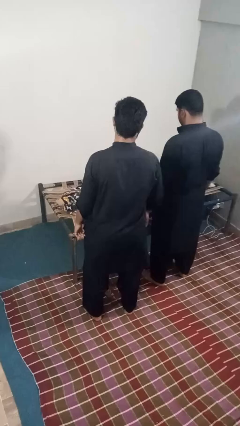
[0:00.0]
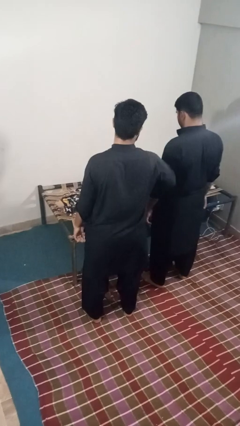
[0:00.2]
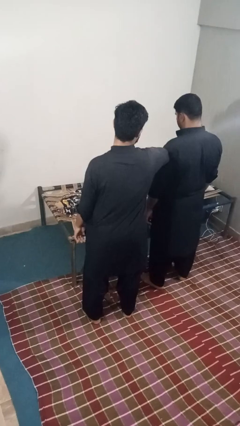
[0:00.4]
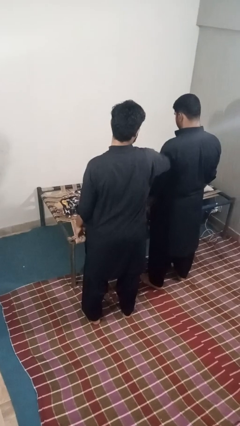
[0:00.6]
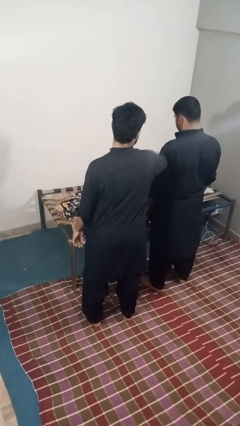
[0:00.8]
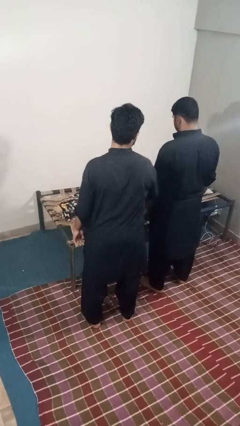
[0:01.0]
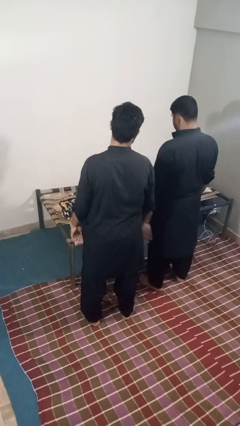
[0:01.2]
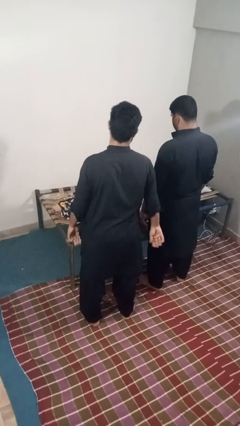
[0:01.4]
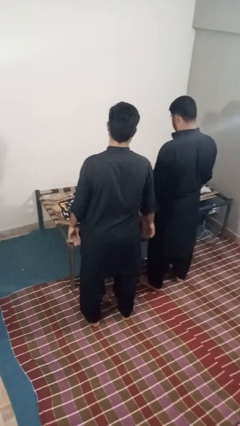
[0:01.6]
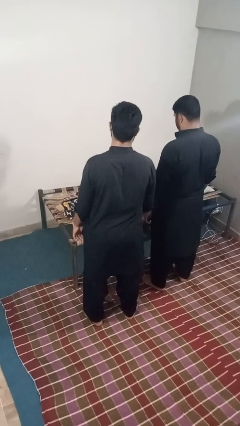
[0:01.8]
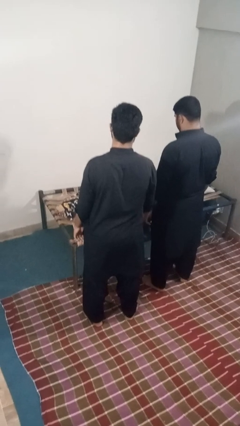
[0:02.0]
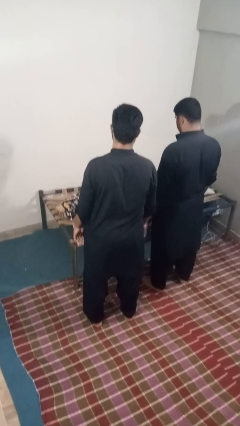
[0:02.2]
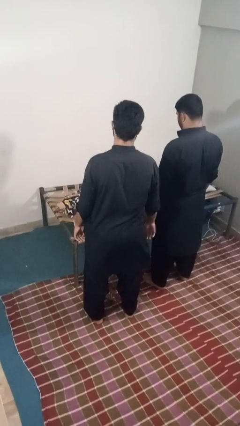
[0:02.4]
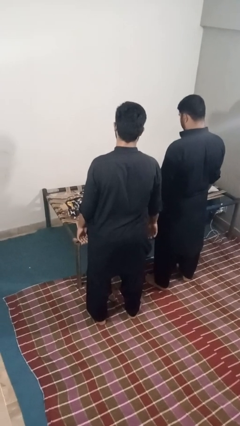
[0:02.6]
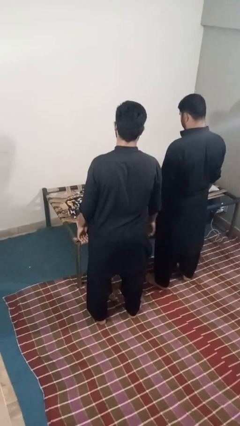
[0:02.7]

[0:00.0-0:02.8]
person nudges person with elbow

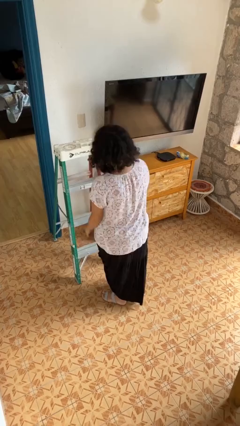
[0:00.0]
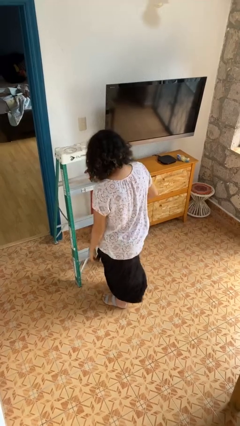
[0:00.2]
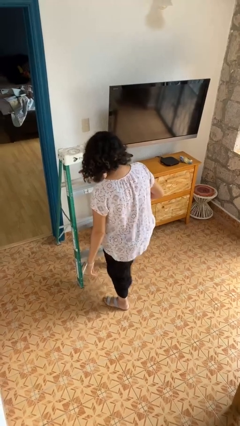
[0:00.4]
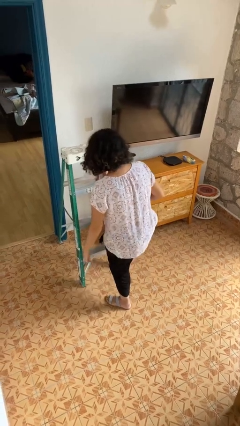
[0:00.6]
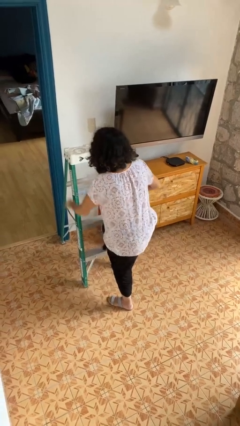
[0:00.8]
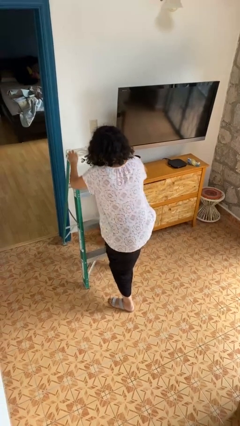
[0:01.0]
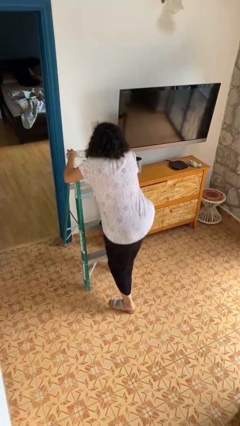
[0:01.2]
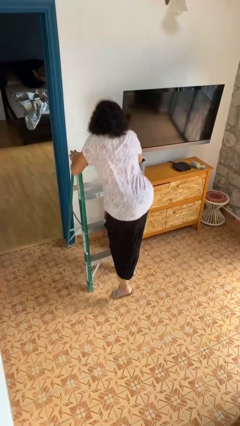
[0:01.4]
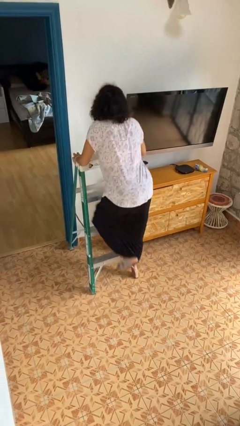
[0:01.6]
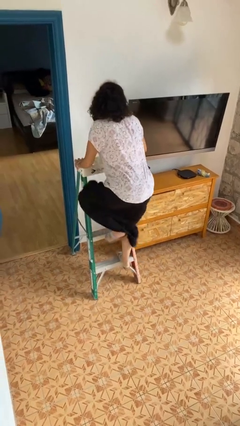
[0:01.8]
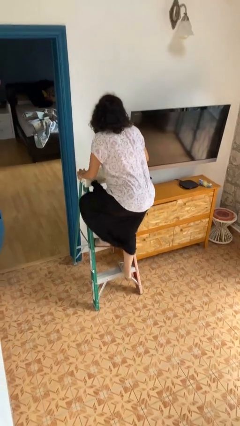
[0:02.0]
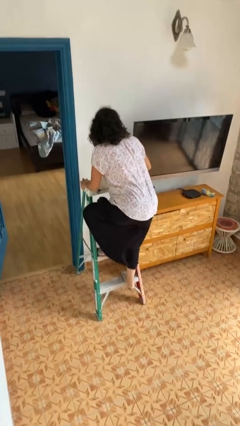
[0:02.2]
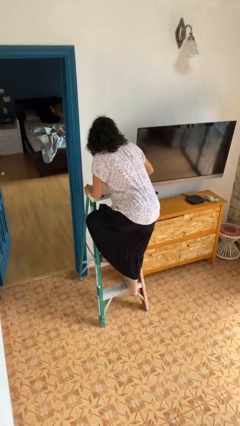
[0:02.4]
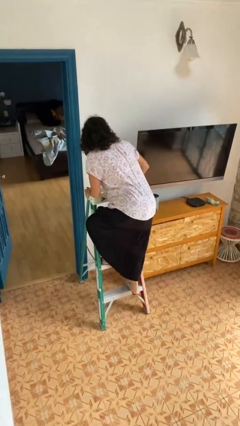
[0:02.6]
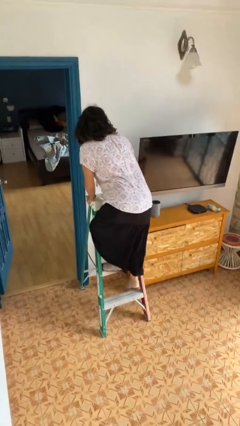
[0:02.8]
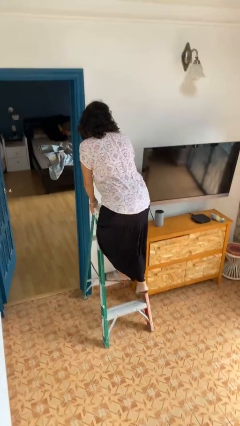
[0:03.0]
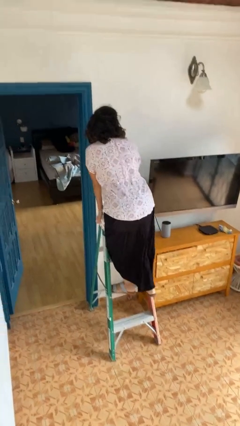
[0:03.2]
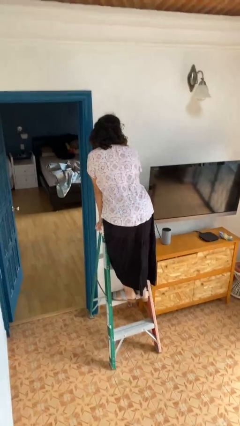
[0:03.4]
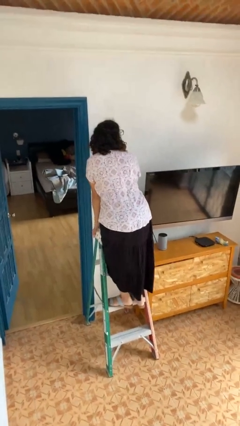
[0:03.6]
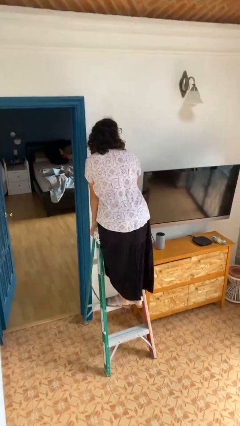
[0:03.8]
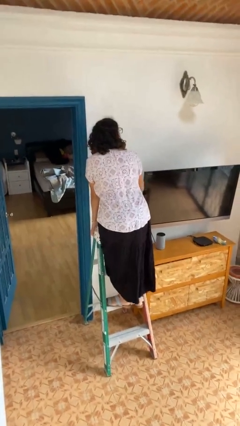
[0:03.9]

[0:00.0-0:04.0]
person climbs up ladder

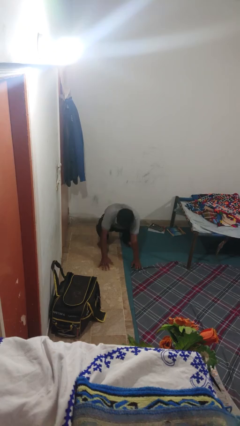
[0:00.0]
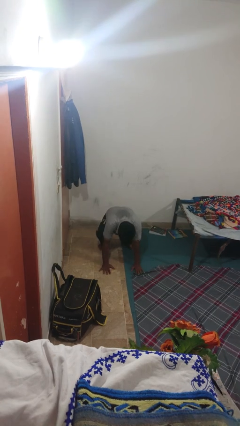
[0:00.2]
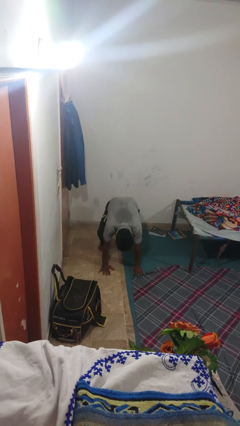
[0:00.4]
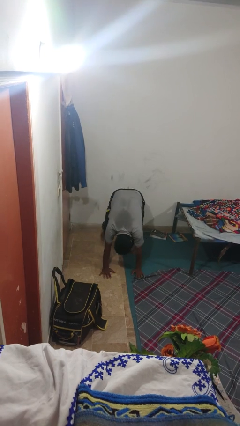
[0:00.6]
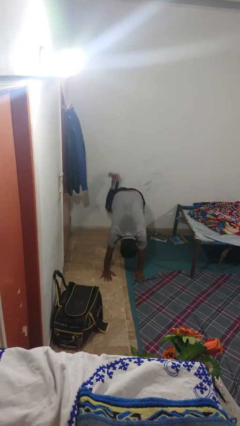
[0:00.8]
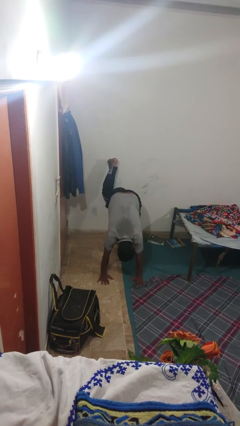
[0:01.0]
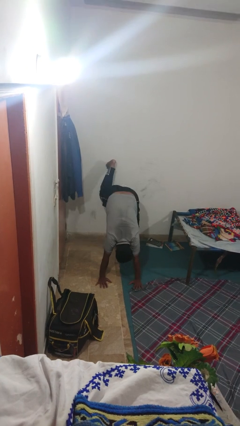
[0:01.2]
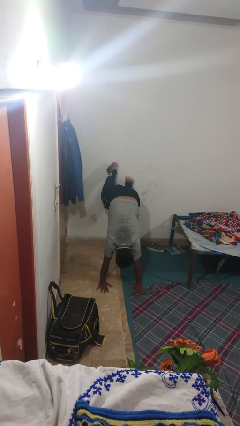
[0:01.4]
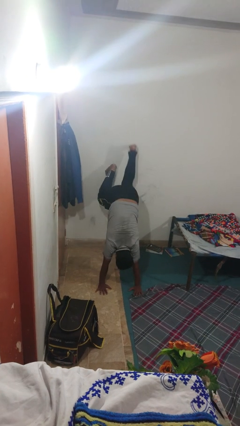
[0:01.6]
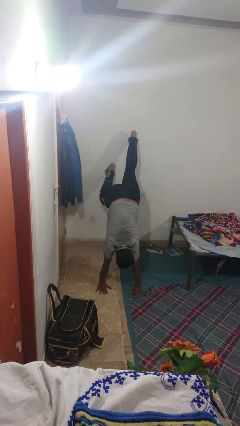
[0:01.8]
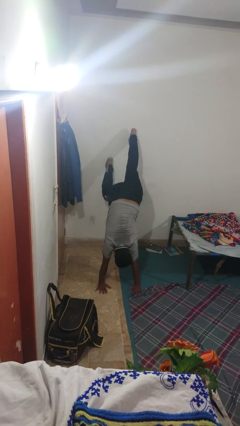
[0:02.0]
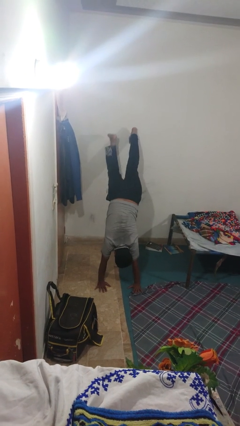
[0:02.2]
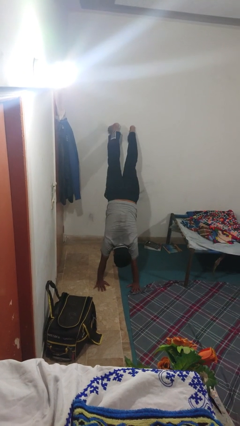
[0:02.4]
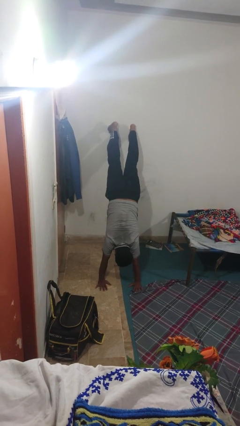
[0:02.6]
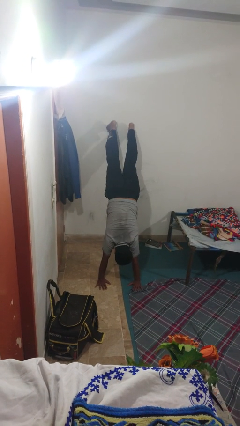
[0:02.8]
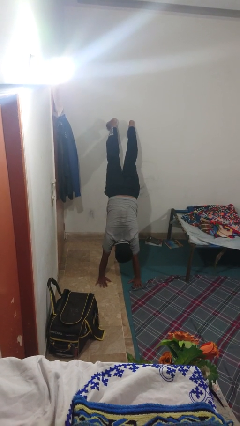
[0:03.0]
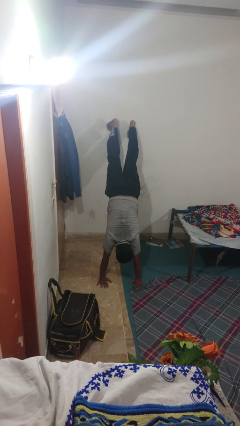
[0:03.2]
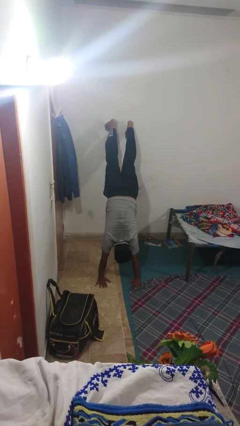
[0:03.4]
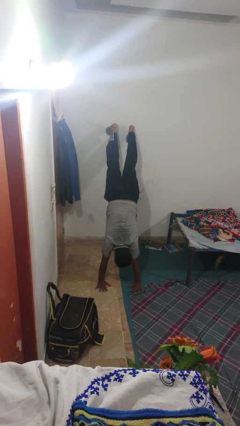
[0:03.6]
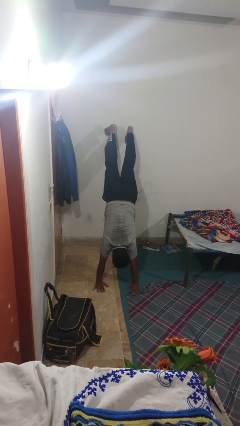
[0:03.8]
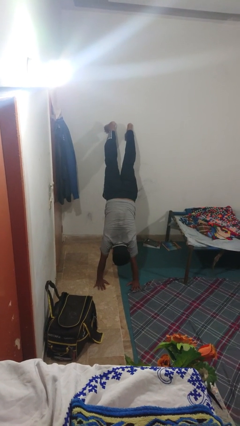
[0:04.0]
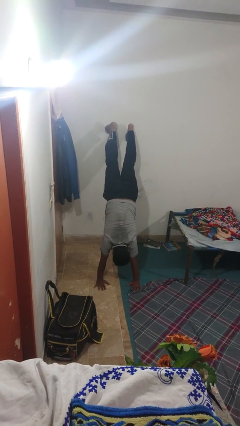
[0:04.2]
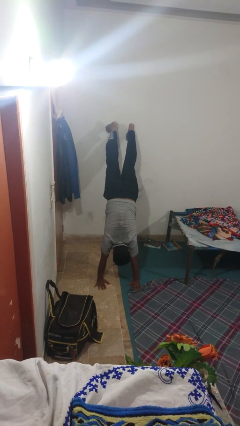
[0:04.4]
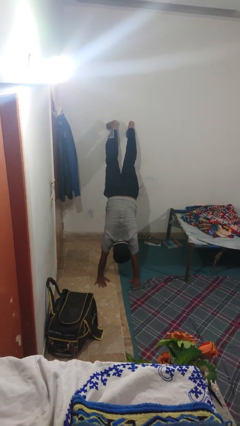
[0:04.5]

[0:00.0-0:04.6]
person handstand

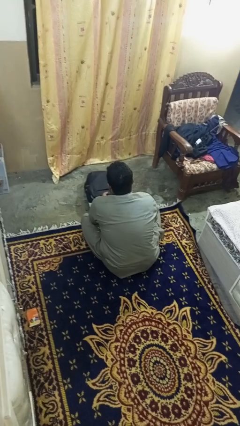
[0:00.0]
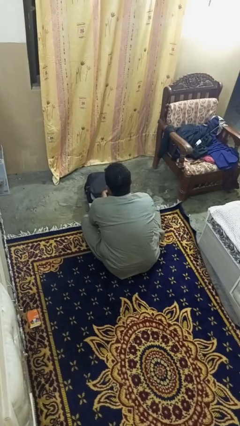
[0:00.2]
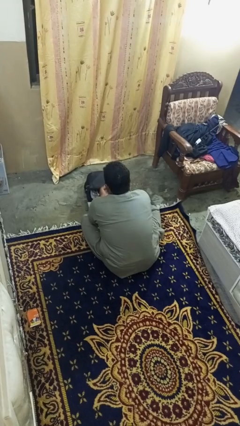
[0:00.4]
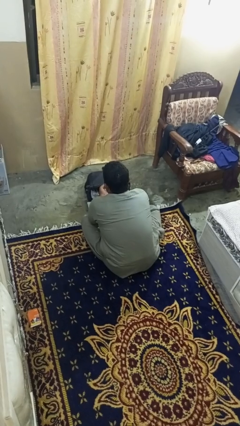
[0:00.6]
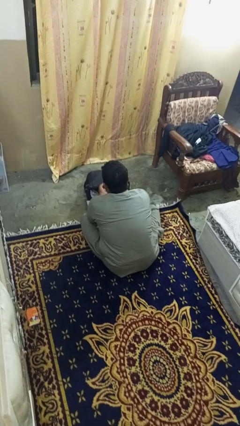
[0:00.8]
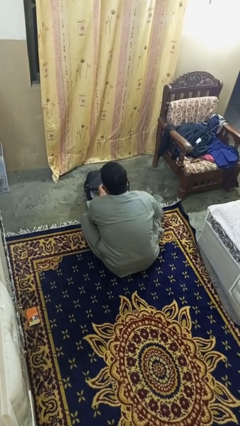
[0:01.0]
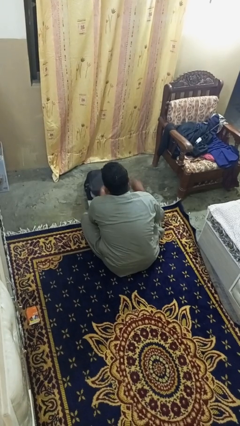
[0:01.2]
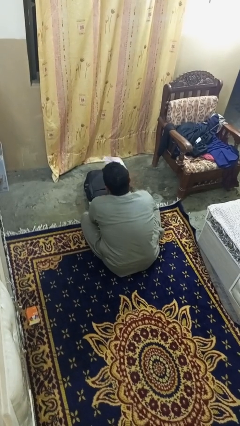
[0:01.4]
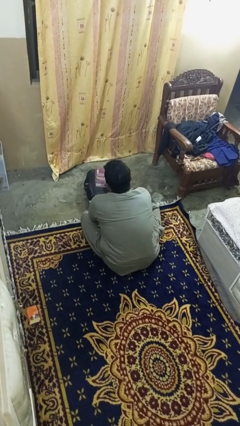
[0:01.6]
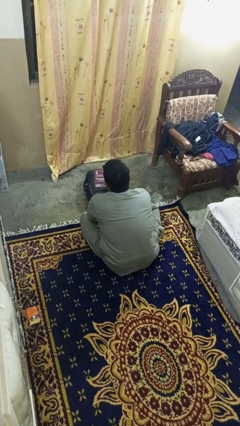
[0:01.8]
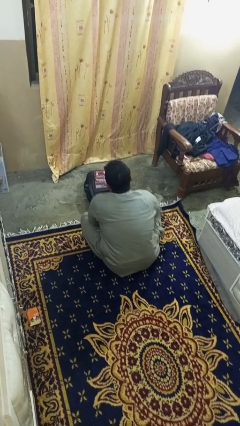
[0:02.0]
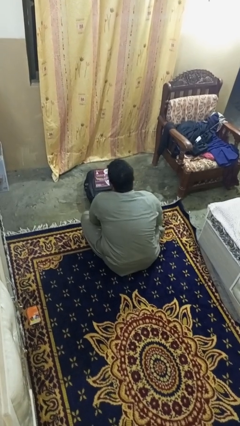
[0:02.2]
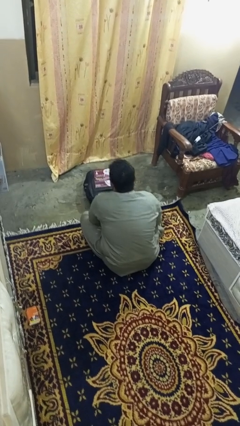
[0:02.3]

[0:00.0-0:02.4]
person takes object from bag

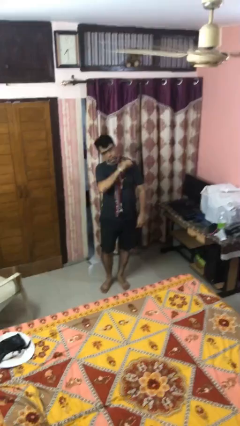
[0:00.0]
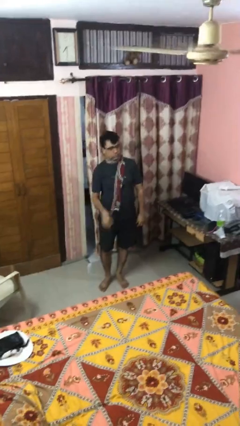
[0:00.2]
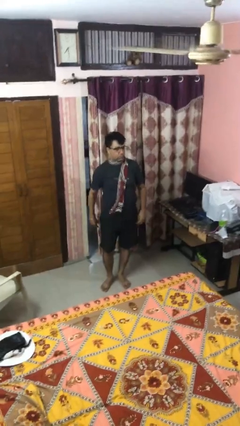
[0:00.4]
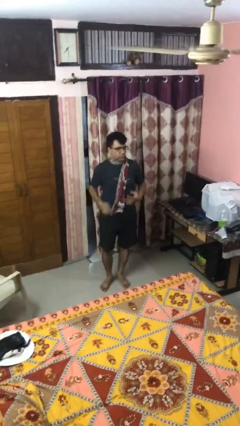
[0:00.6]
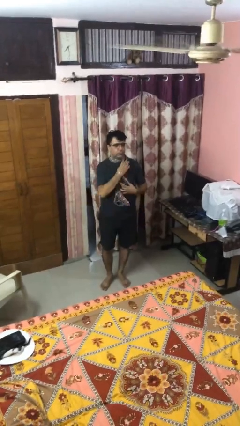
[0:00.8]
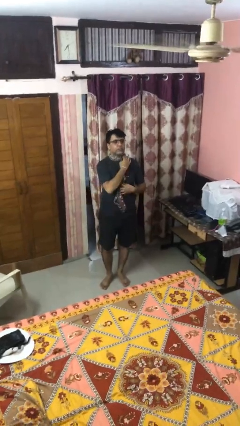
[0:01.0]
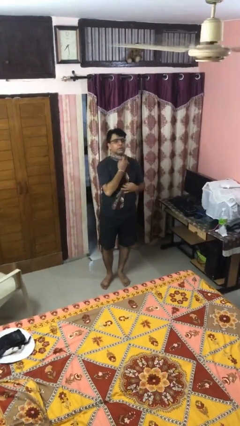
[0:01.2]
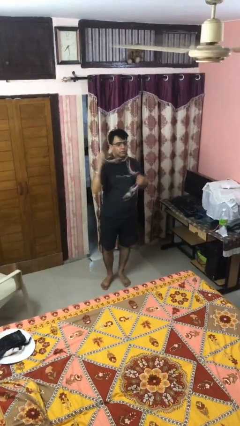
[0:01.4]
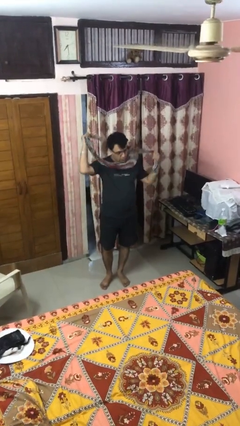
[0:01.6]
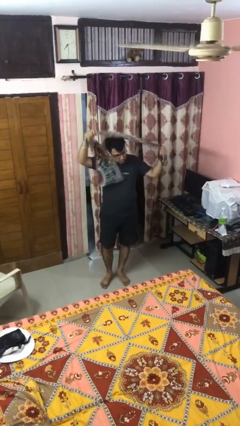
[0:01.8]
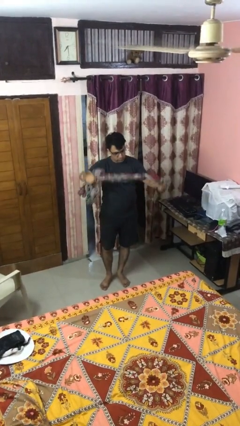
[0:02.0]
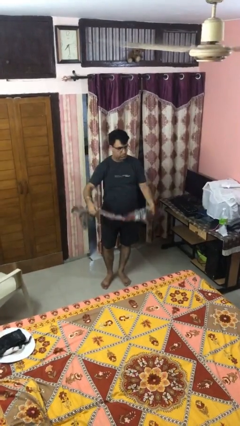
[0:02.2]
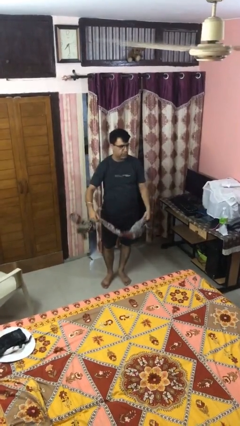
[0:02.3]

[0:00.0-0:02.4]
person takes off scarf

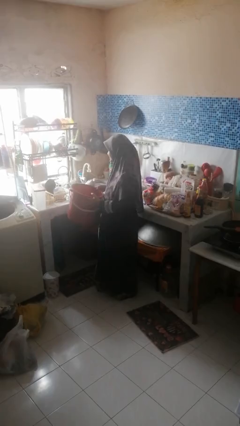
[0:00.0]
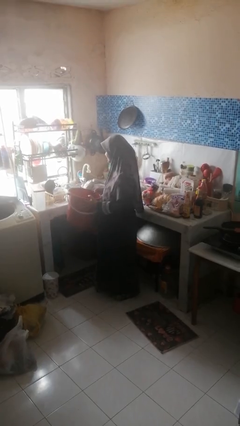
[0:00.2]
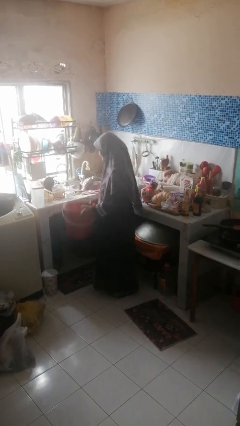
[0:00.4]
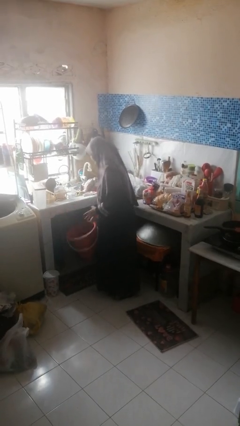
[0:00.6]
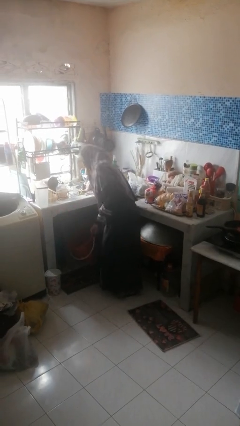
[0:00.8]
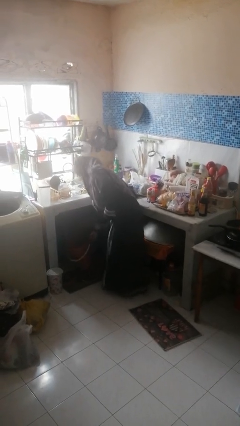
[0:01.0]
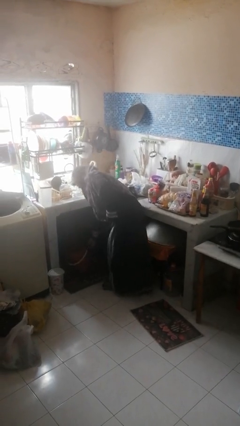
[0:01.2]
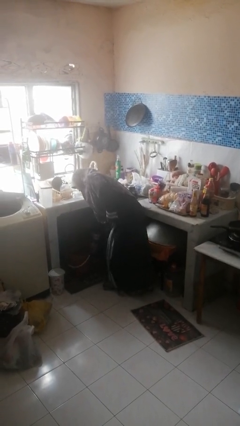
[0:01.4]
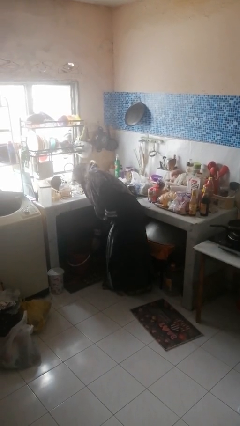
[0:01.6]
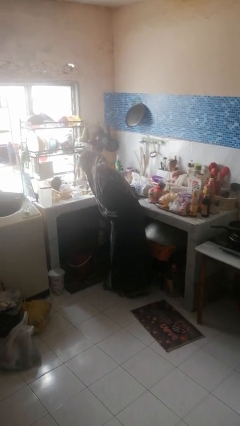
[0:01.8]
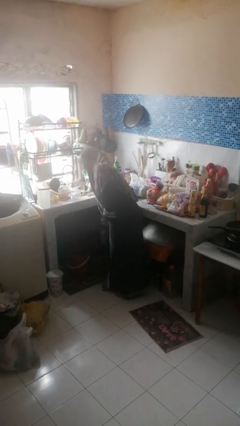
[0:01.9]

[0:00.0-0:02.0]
person puts down object into cabinet
